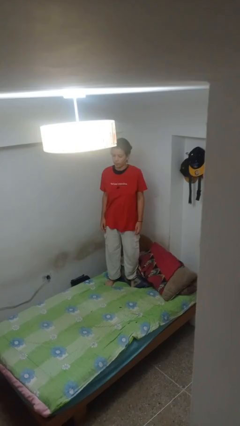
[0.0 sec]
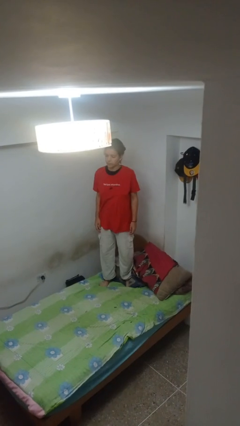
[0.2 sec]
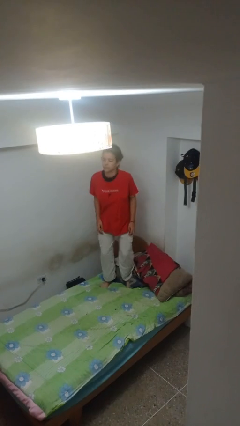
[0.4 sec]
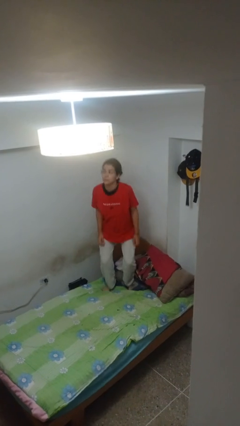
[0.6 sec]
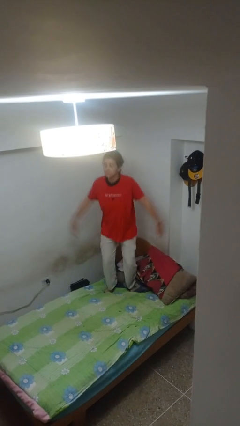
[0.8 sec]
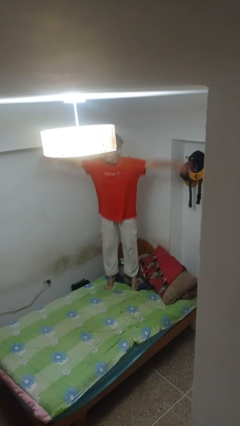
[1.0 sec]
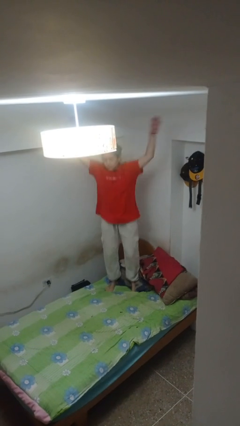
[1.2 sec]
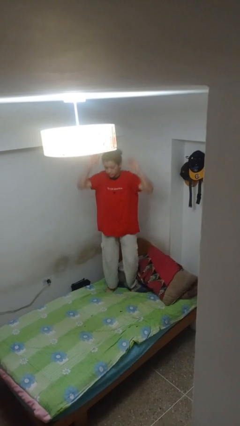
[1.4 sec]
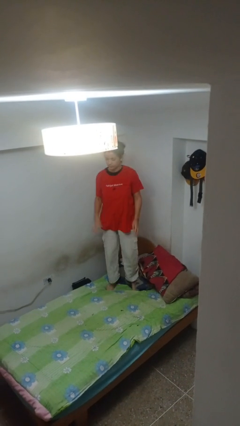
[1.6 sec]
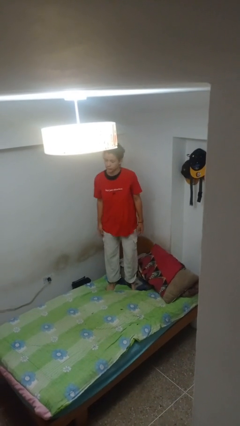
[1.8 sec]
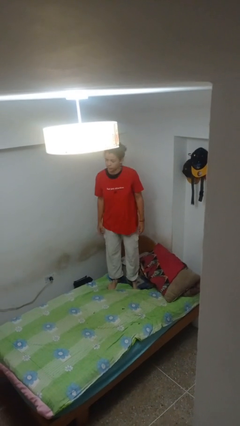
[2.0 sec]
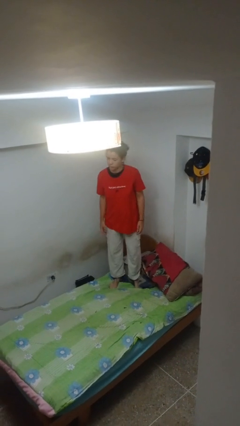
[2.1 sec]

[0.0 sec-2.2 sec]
person jumps on bed

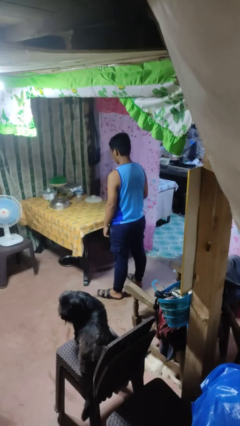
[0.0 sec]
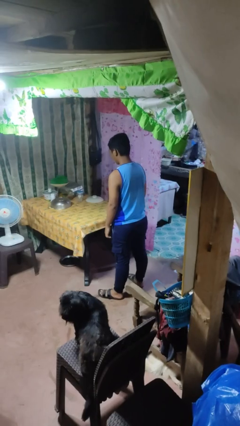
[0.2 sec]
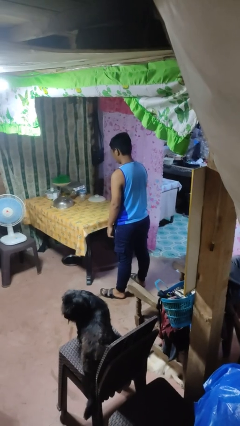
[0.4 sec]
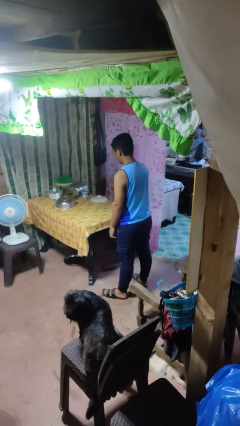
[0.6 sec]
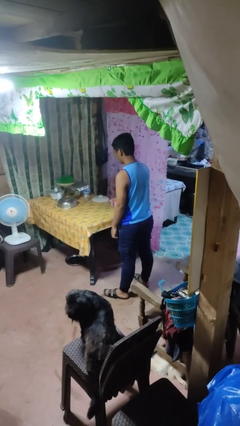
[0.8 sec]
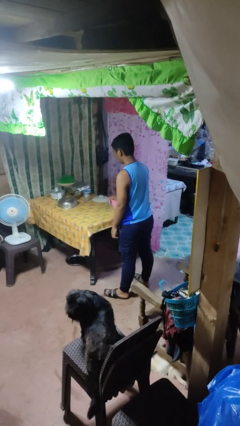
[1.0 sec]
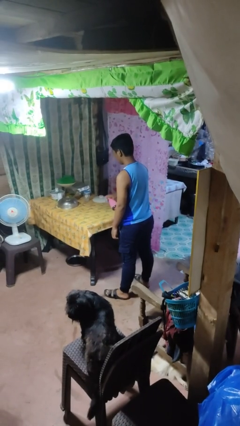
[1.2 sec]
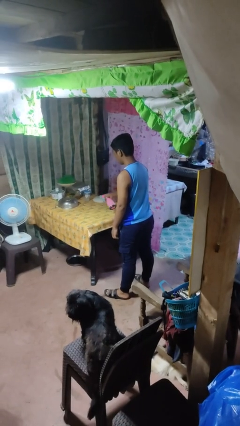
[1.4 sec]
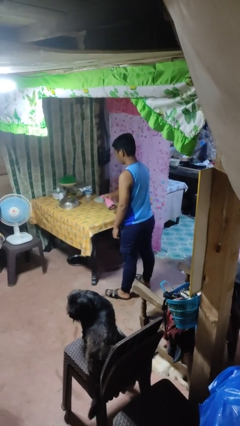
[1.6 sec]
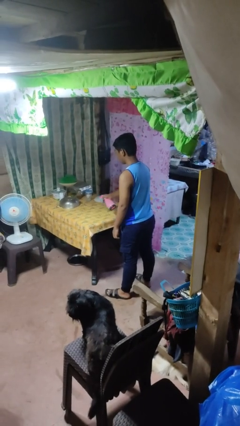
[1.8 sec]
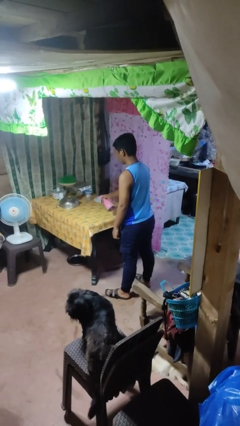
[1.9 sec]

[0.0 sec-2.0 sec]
person sprays from bottle

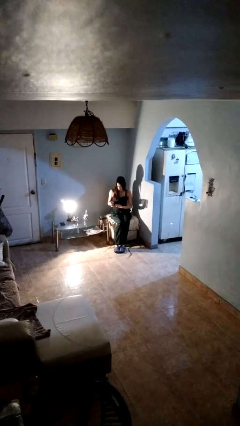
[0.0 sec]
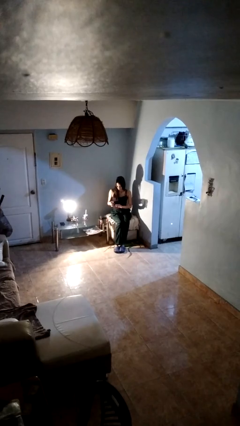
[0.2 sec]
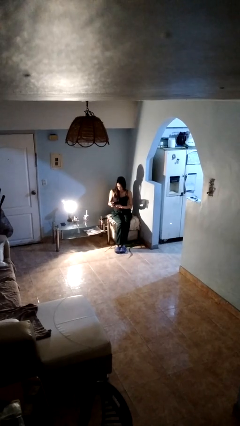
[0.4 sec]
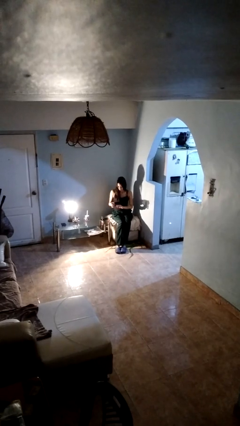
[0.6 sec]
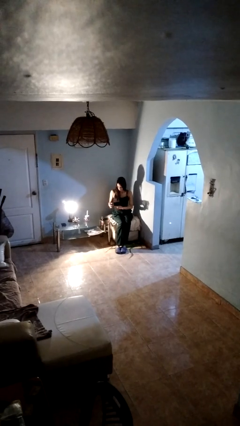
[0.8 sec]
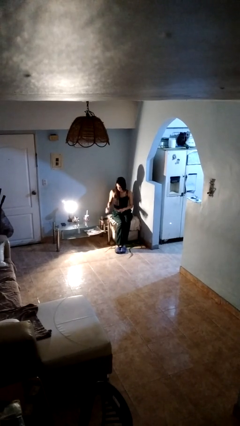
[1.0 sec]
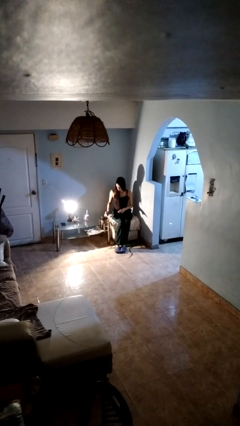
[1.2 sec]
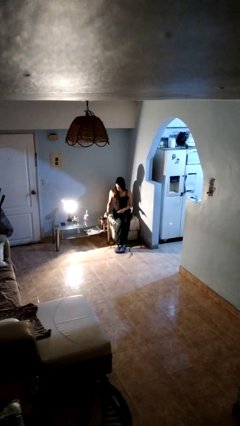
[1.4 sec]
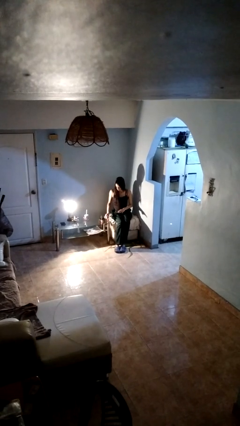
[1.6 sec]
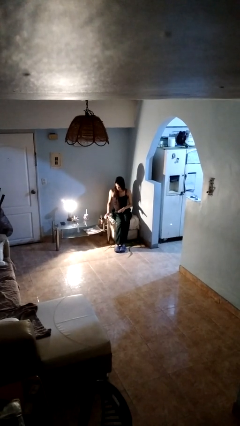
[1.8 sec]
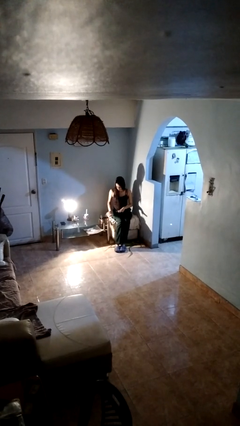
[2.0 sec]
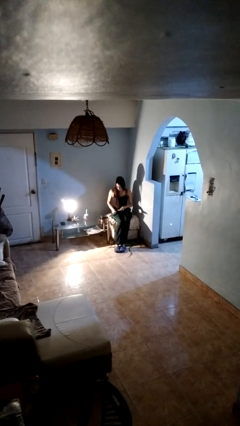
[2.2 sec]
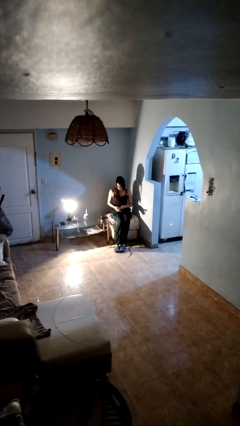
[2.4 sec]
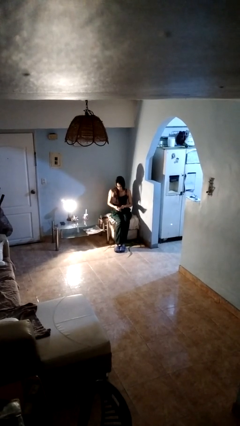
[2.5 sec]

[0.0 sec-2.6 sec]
person paints fingernails

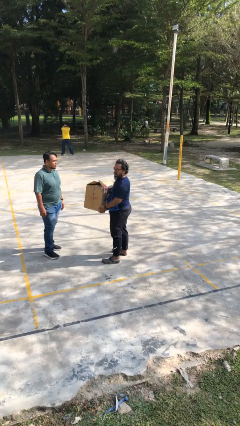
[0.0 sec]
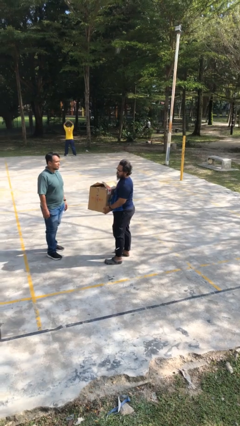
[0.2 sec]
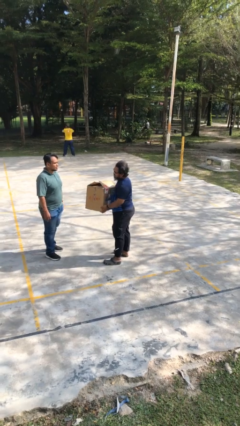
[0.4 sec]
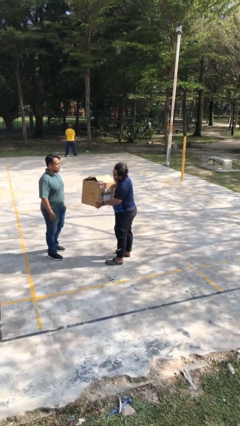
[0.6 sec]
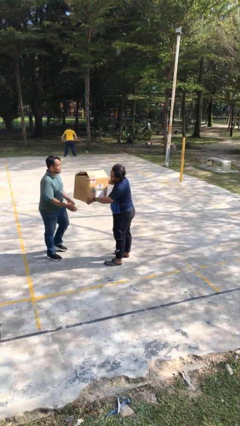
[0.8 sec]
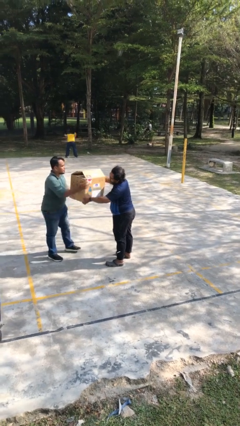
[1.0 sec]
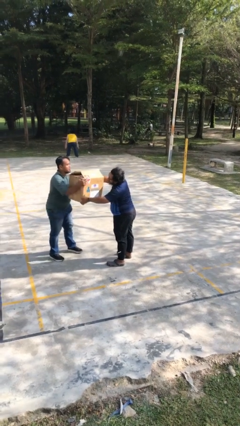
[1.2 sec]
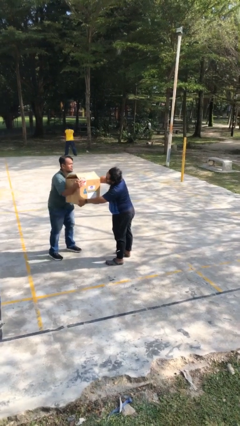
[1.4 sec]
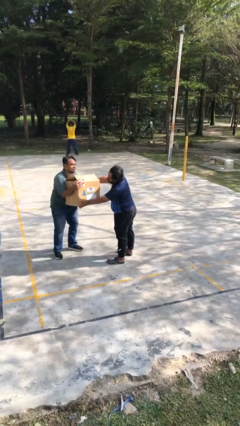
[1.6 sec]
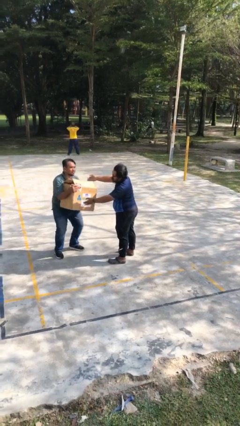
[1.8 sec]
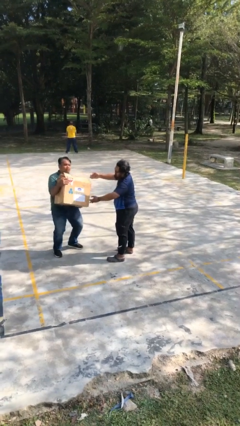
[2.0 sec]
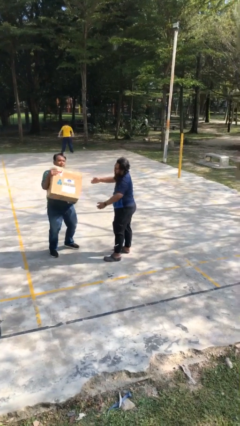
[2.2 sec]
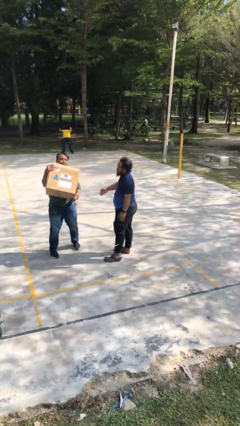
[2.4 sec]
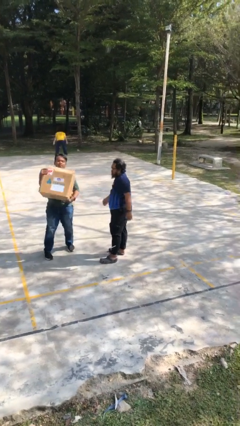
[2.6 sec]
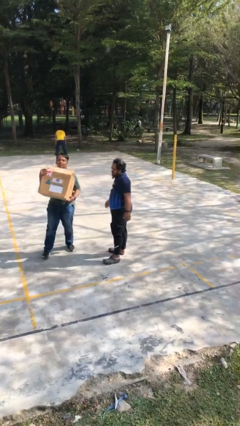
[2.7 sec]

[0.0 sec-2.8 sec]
person transfers object to person

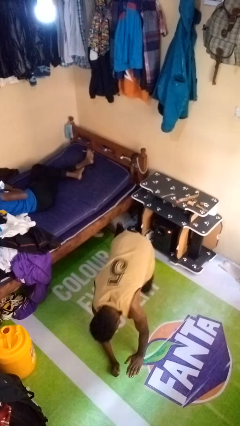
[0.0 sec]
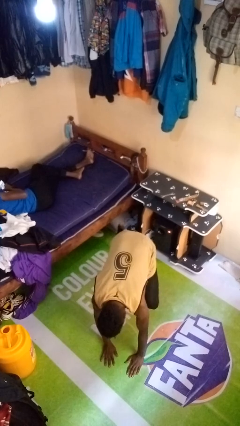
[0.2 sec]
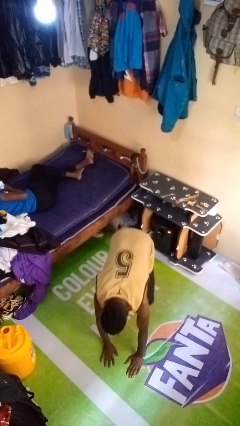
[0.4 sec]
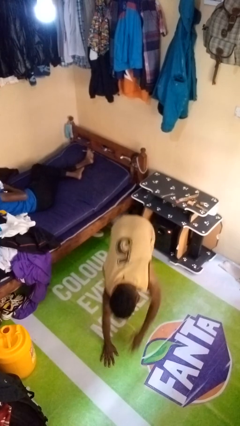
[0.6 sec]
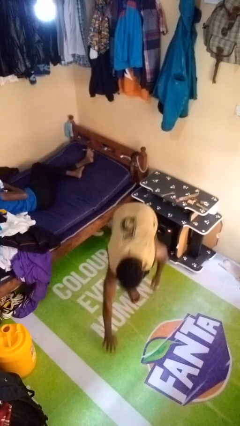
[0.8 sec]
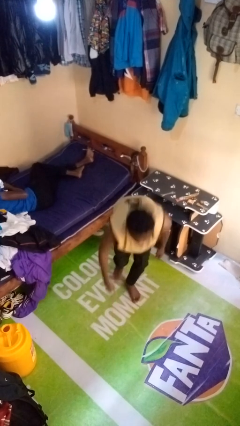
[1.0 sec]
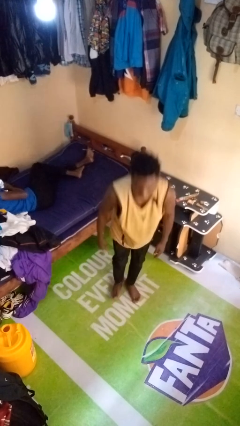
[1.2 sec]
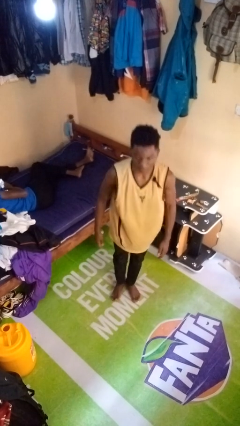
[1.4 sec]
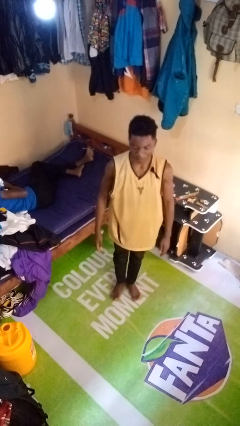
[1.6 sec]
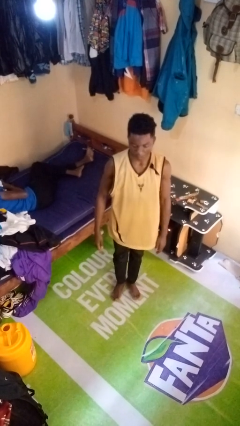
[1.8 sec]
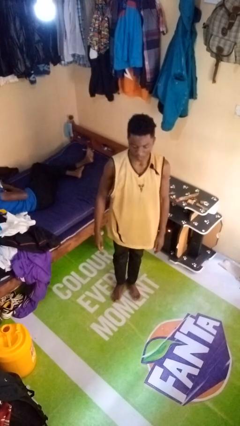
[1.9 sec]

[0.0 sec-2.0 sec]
person stands up from floor

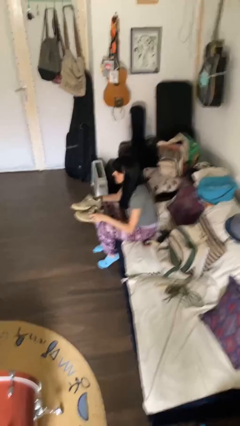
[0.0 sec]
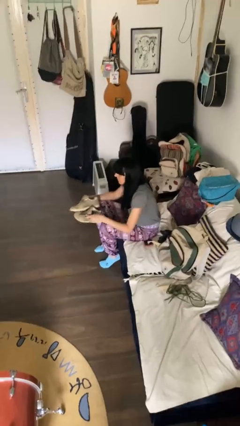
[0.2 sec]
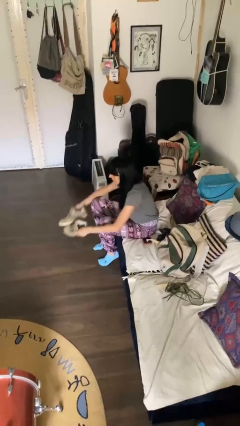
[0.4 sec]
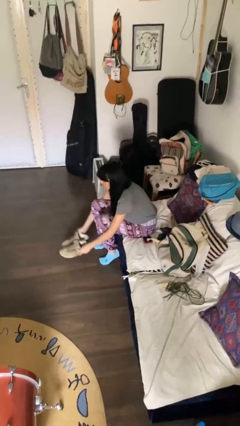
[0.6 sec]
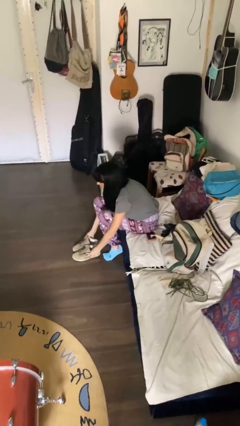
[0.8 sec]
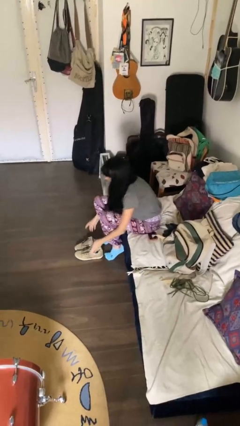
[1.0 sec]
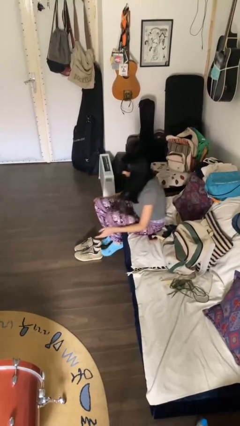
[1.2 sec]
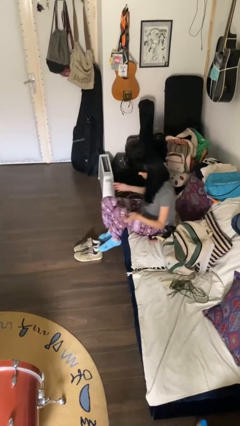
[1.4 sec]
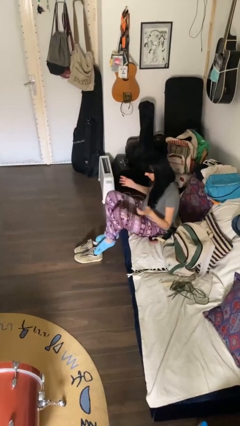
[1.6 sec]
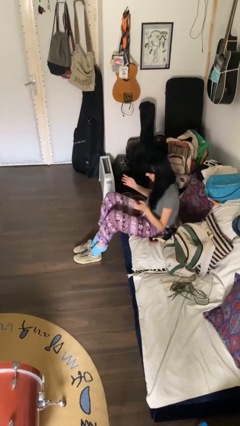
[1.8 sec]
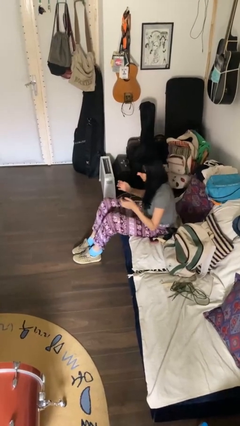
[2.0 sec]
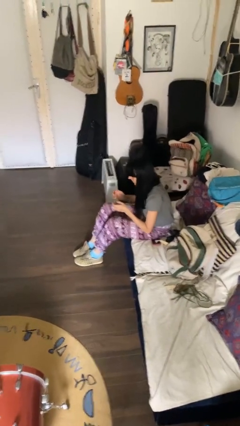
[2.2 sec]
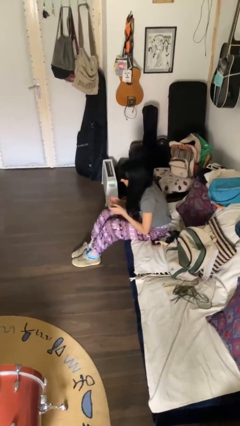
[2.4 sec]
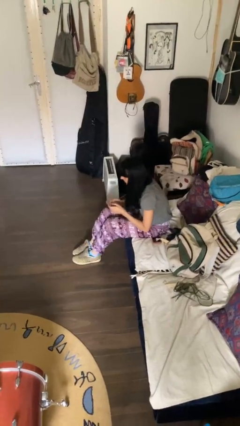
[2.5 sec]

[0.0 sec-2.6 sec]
person puts on shoes

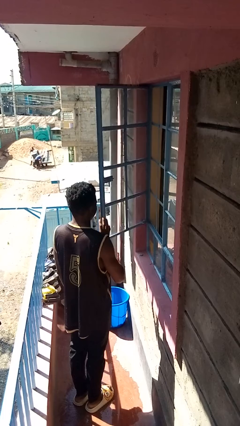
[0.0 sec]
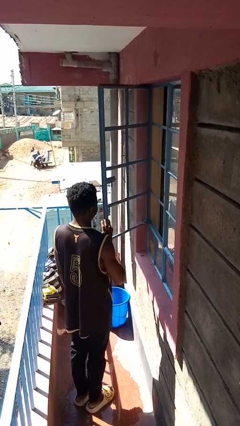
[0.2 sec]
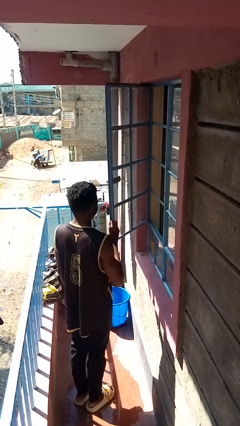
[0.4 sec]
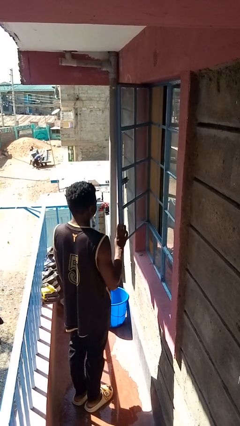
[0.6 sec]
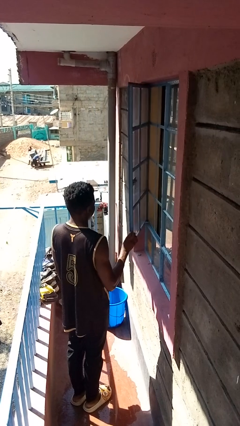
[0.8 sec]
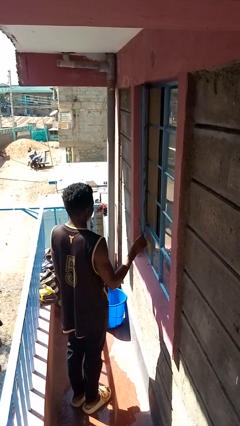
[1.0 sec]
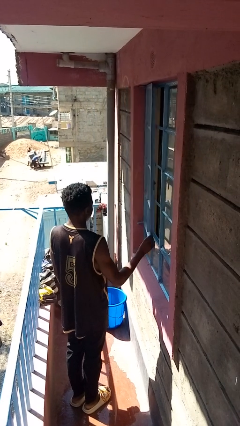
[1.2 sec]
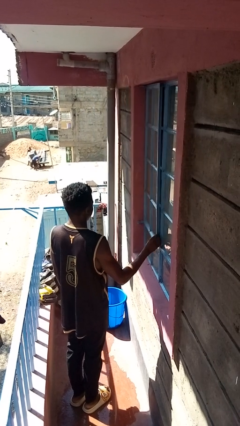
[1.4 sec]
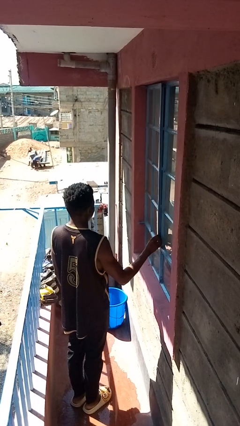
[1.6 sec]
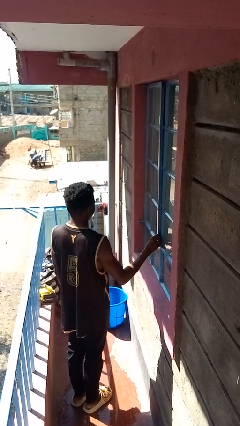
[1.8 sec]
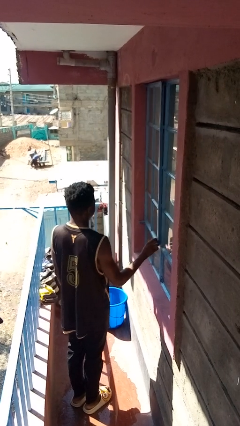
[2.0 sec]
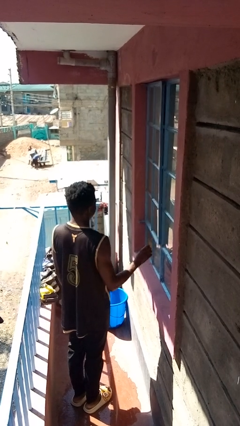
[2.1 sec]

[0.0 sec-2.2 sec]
person closes home window

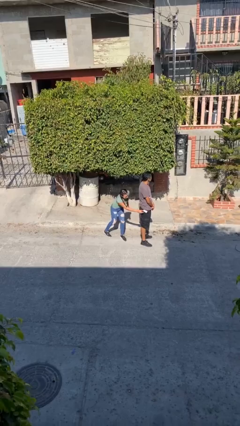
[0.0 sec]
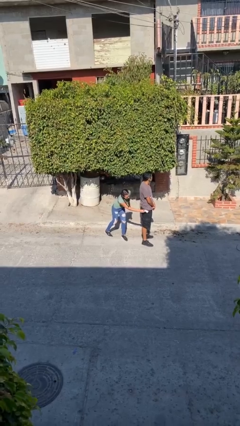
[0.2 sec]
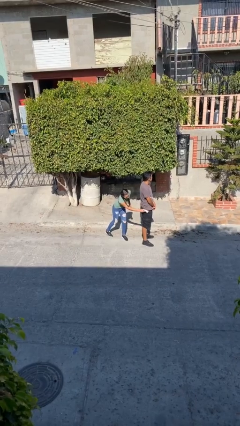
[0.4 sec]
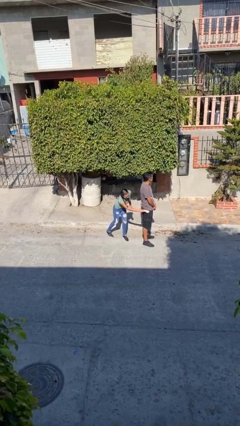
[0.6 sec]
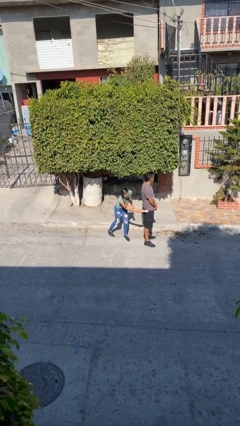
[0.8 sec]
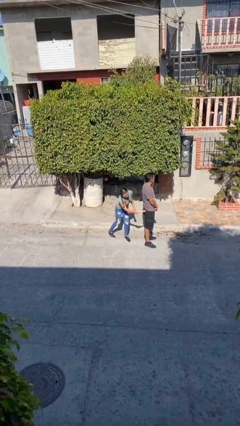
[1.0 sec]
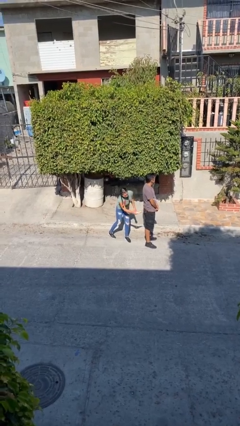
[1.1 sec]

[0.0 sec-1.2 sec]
person steals object from person
